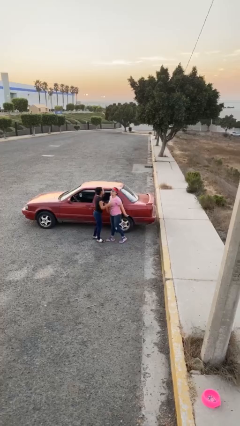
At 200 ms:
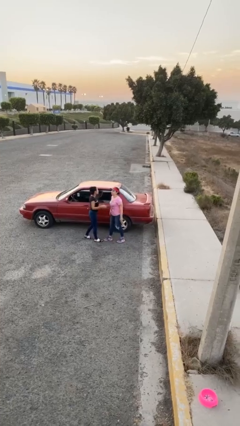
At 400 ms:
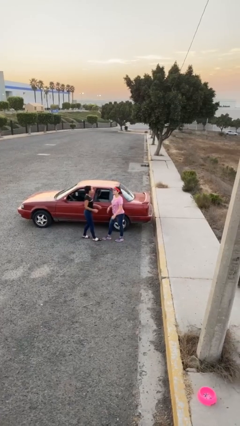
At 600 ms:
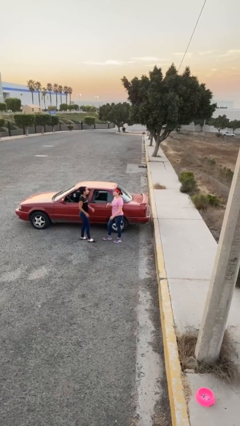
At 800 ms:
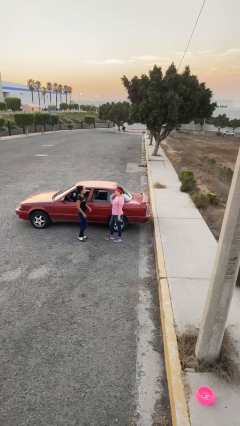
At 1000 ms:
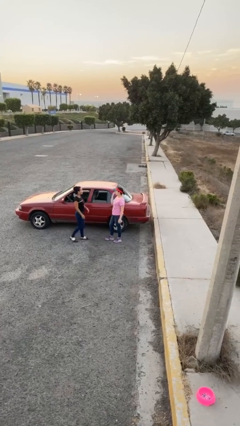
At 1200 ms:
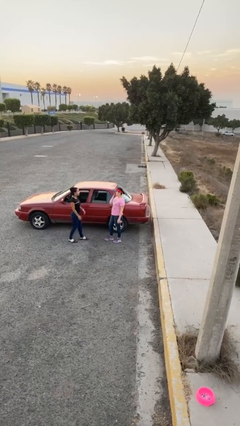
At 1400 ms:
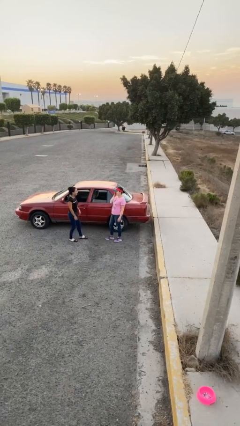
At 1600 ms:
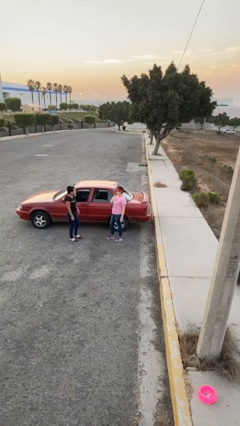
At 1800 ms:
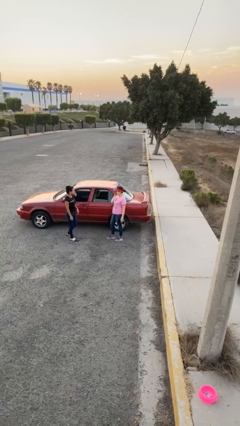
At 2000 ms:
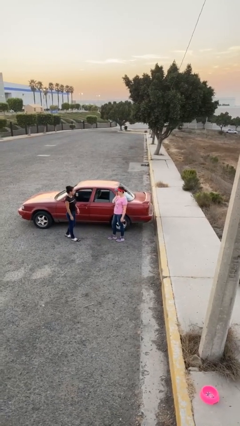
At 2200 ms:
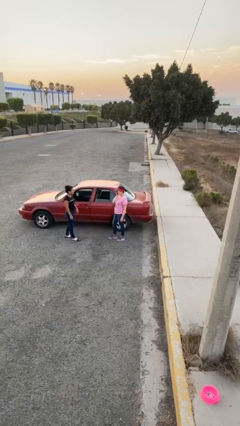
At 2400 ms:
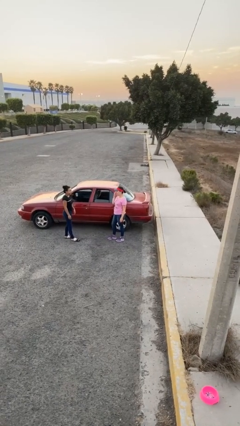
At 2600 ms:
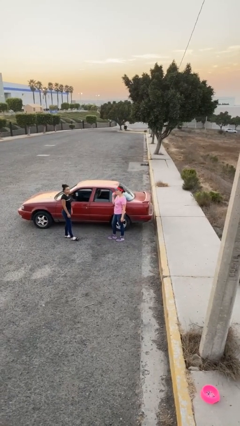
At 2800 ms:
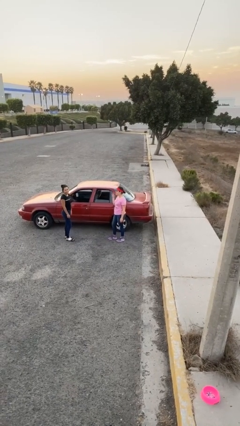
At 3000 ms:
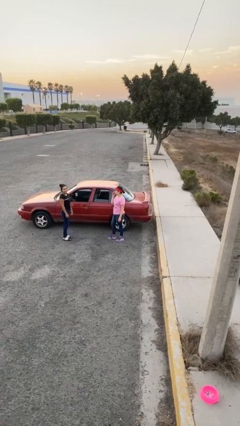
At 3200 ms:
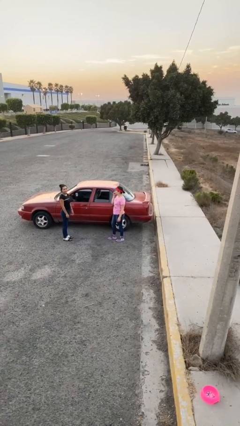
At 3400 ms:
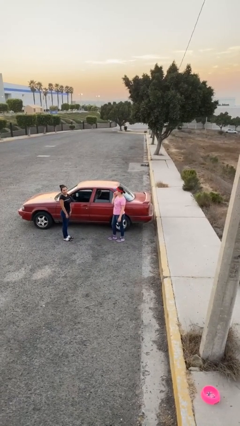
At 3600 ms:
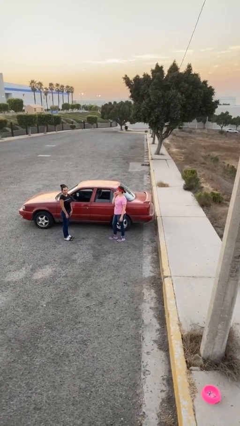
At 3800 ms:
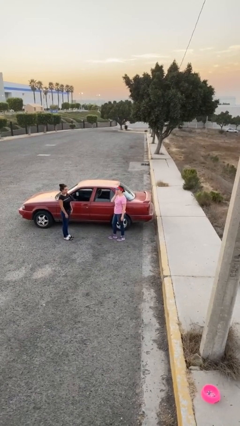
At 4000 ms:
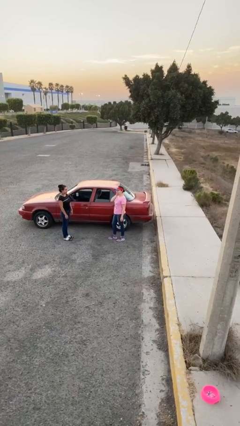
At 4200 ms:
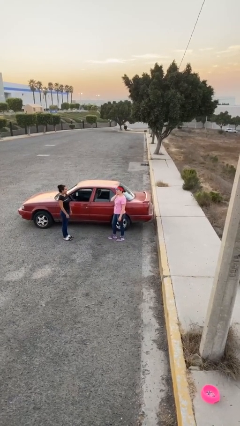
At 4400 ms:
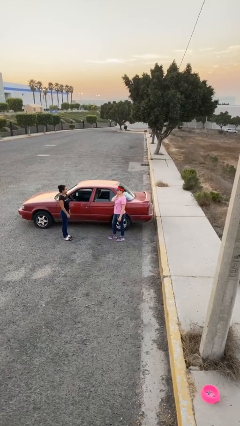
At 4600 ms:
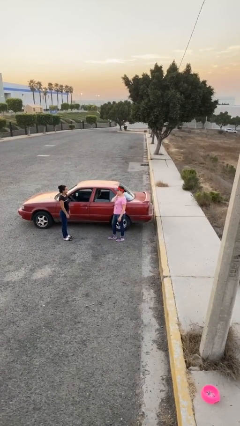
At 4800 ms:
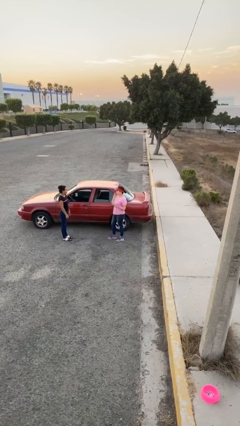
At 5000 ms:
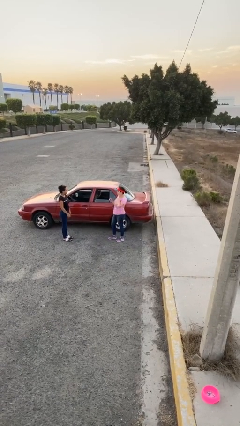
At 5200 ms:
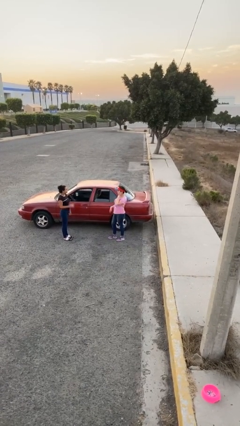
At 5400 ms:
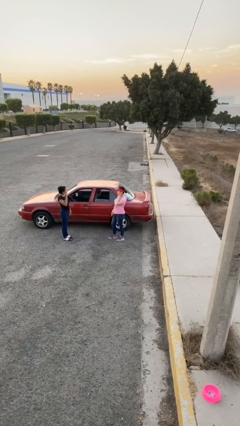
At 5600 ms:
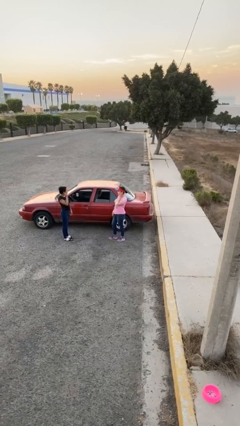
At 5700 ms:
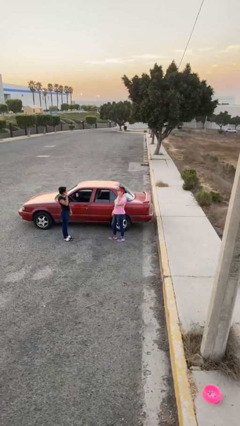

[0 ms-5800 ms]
person talks to person

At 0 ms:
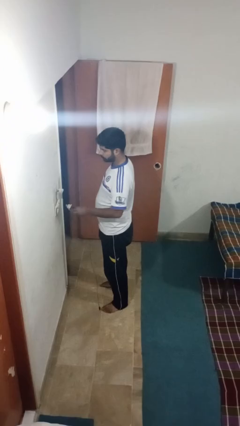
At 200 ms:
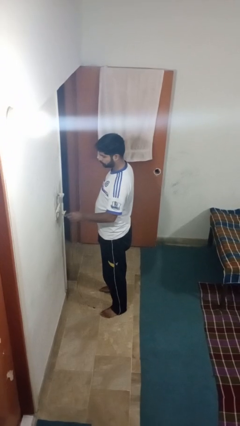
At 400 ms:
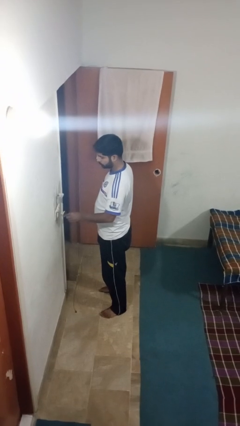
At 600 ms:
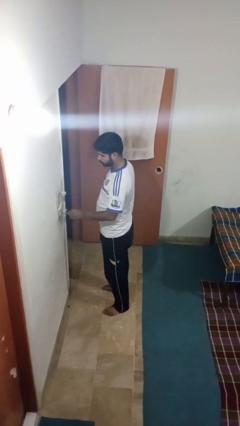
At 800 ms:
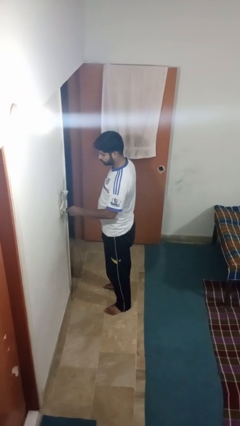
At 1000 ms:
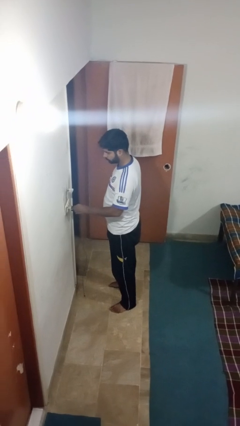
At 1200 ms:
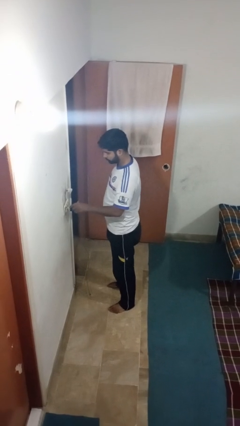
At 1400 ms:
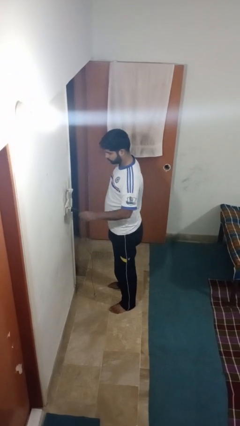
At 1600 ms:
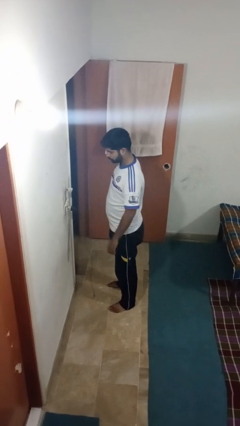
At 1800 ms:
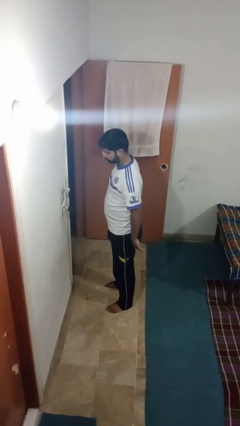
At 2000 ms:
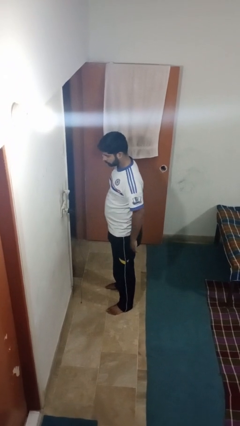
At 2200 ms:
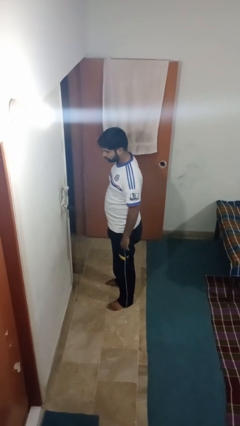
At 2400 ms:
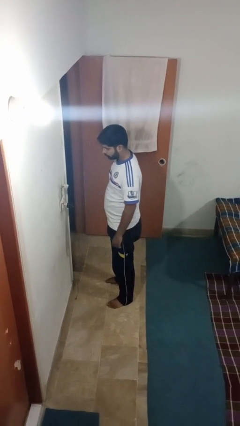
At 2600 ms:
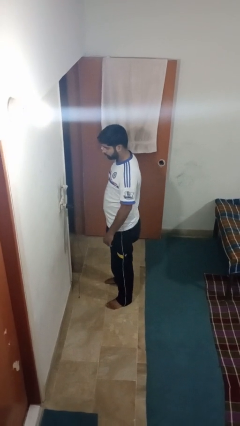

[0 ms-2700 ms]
person plugs into electrical socket

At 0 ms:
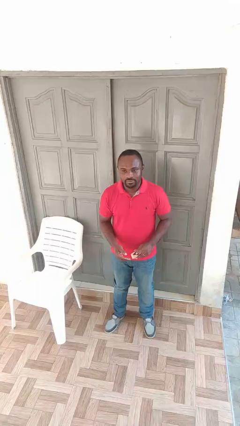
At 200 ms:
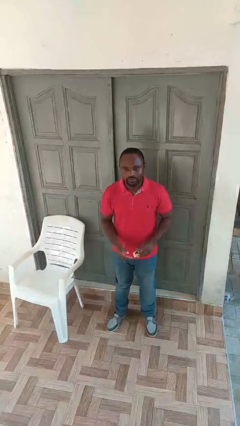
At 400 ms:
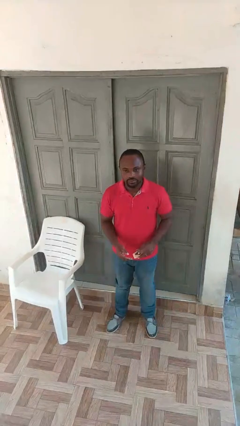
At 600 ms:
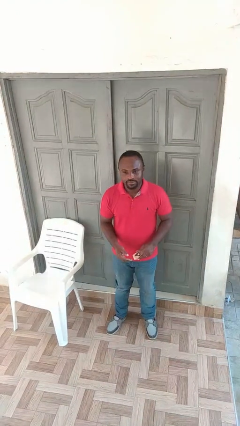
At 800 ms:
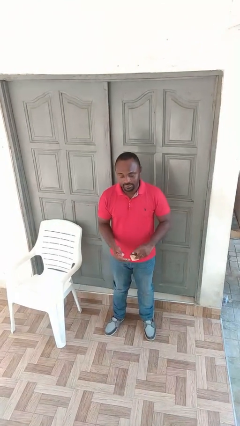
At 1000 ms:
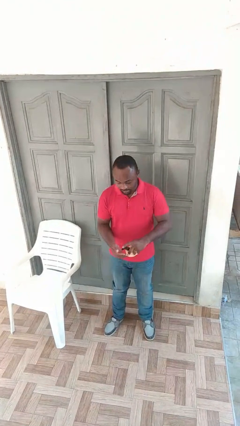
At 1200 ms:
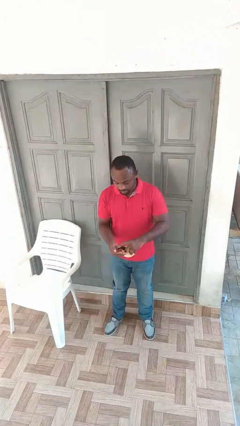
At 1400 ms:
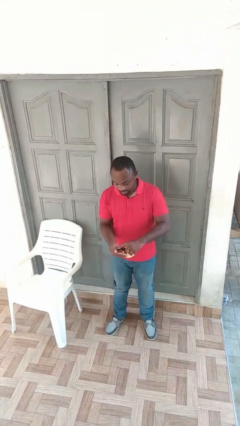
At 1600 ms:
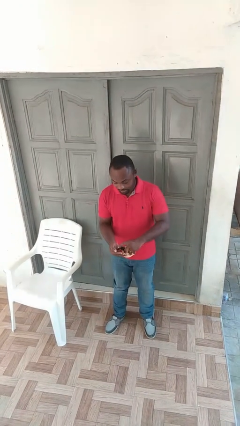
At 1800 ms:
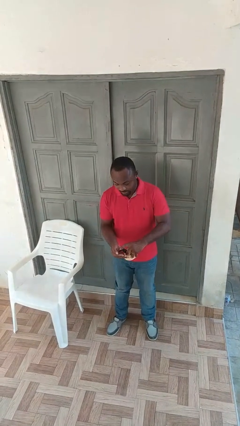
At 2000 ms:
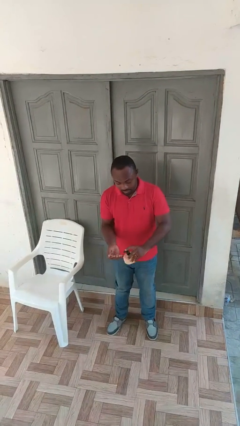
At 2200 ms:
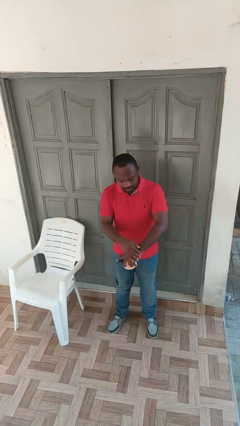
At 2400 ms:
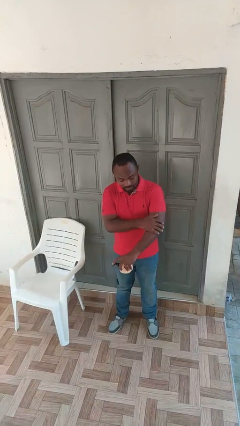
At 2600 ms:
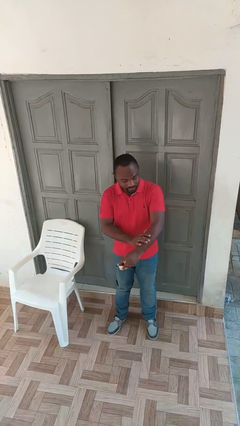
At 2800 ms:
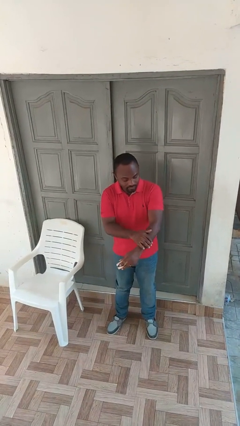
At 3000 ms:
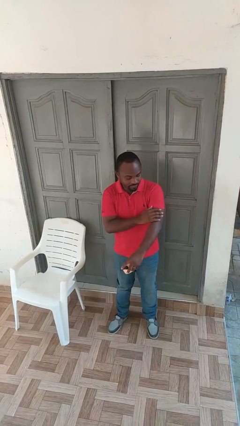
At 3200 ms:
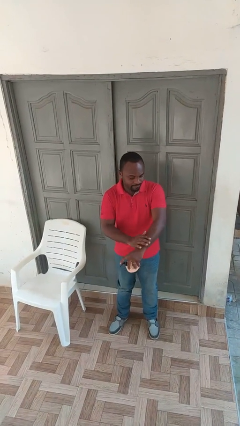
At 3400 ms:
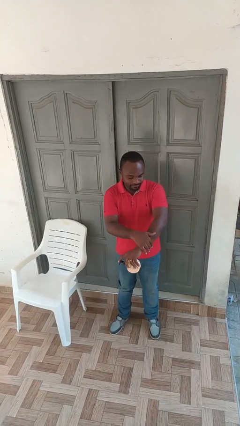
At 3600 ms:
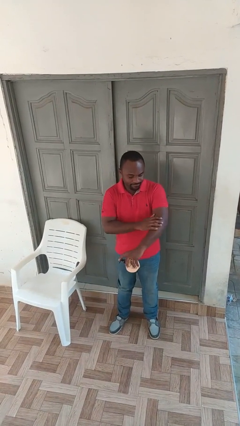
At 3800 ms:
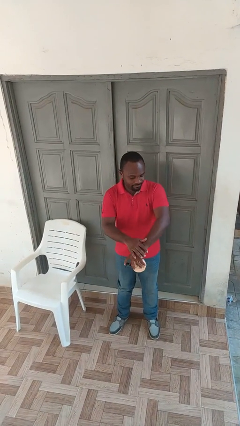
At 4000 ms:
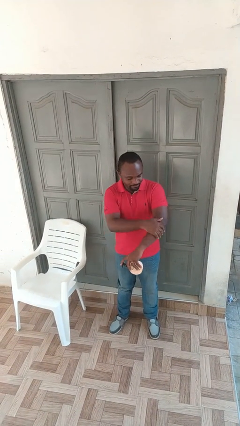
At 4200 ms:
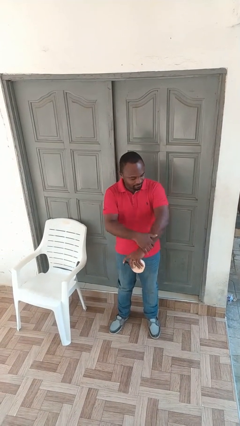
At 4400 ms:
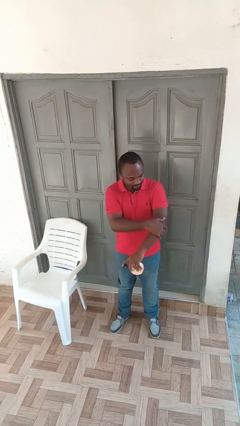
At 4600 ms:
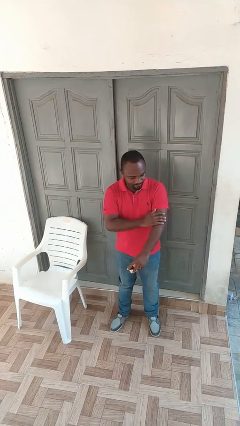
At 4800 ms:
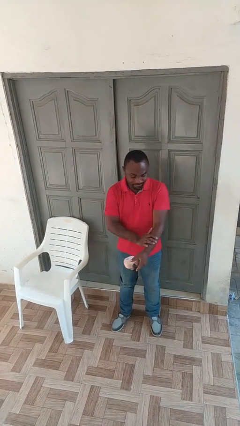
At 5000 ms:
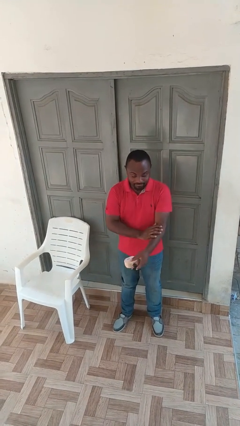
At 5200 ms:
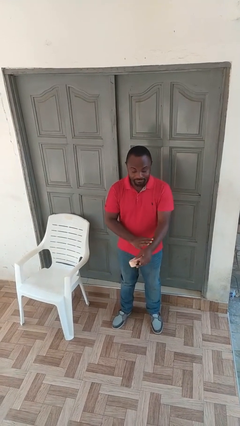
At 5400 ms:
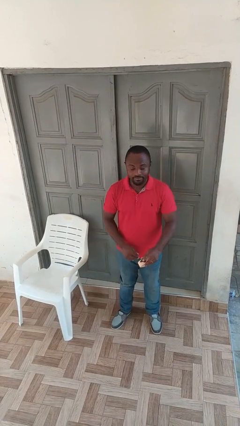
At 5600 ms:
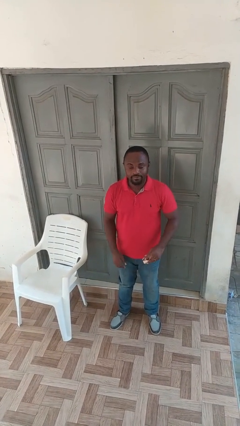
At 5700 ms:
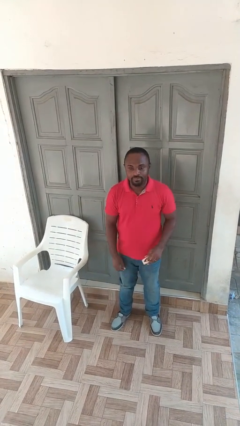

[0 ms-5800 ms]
person applies sunscreen

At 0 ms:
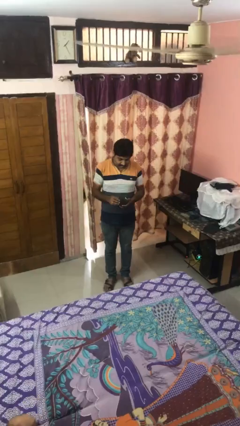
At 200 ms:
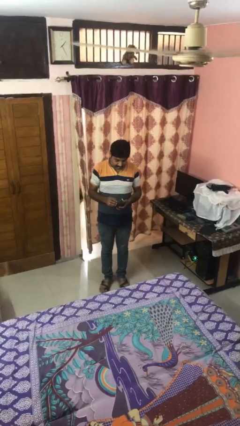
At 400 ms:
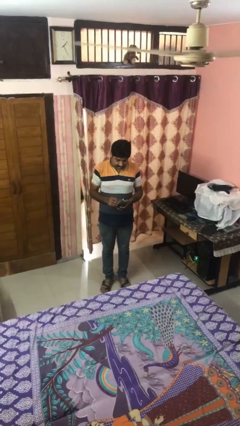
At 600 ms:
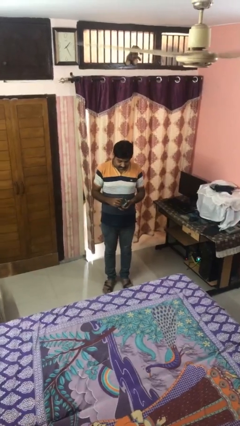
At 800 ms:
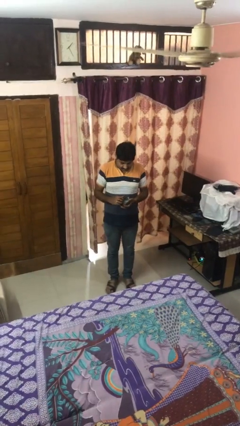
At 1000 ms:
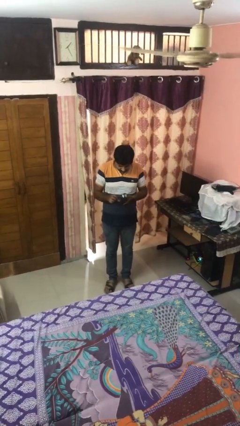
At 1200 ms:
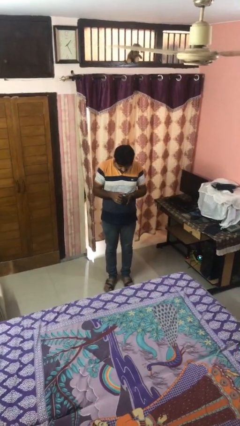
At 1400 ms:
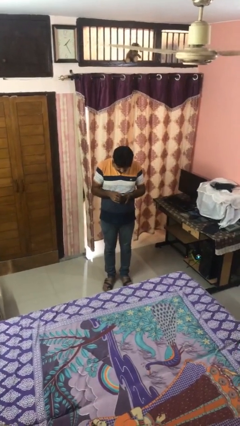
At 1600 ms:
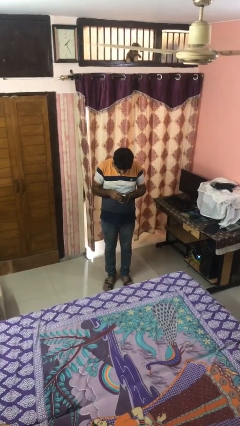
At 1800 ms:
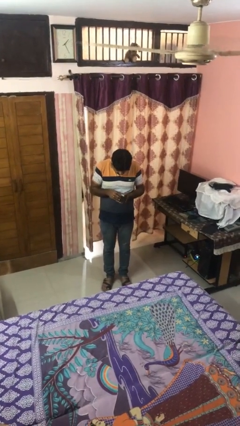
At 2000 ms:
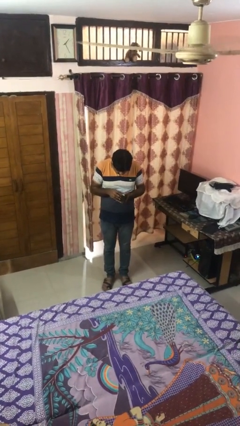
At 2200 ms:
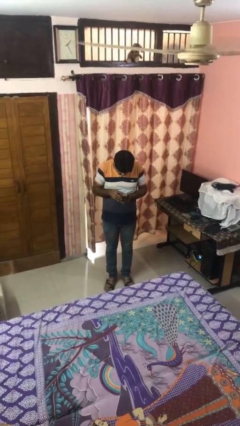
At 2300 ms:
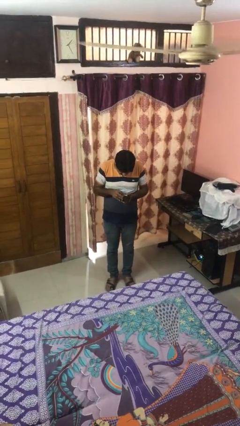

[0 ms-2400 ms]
person searches in purse

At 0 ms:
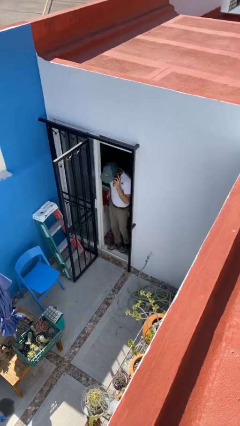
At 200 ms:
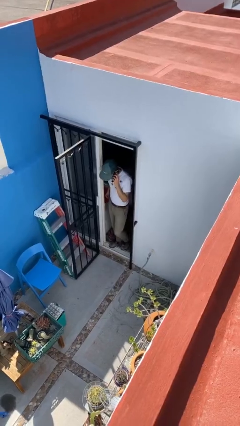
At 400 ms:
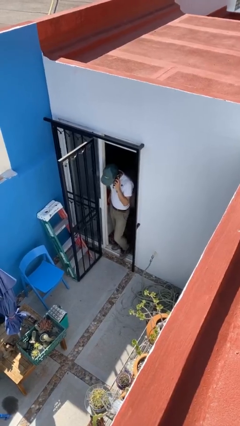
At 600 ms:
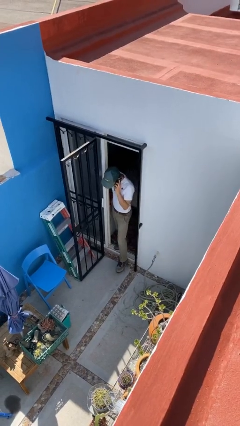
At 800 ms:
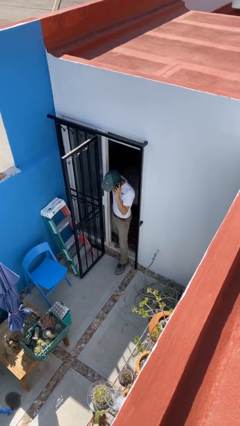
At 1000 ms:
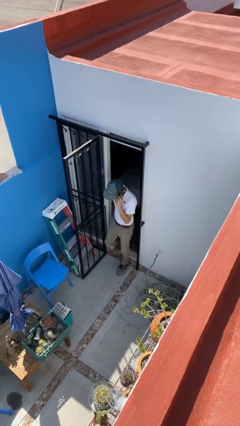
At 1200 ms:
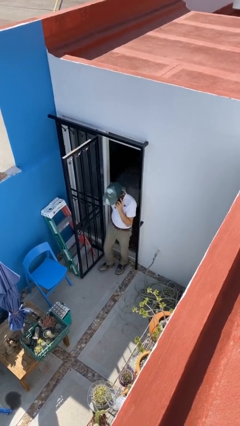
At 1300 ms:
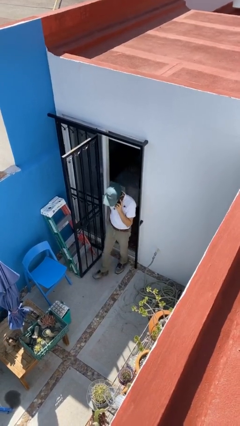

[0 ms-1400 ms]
person enters scene through structure
